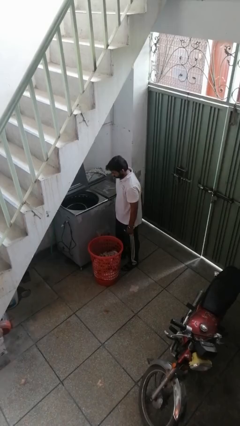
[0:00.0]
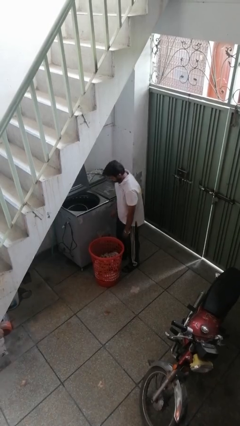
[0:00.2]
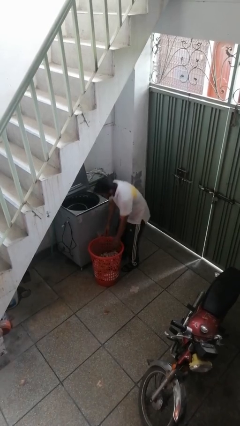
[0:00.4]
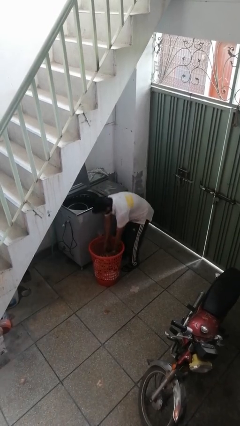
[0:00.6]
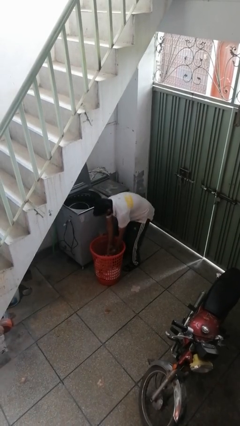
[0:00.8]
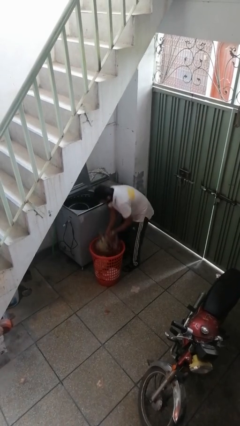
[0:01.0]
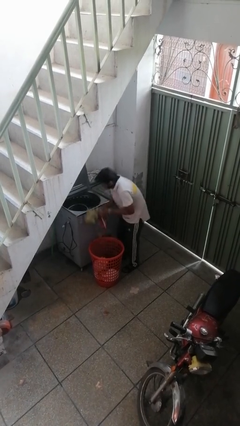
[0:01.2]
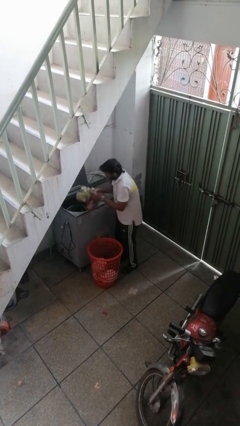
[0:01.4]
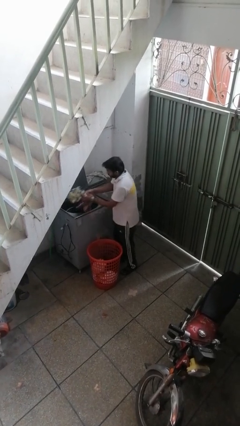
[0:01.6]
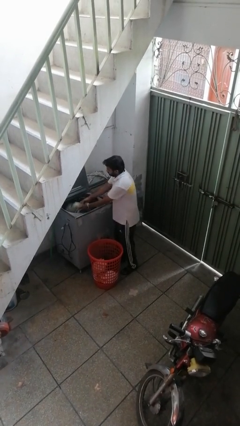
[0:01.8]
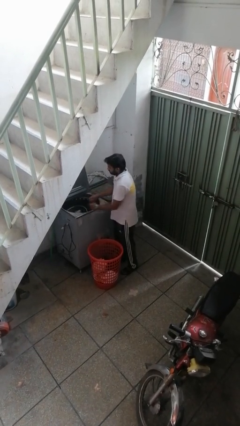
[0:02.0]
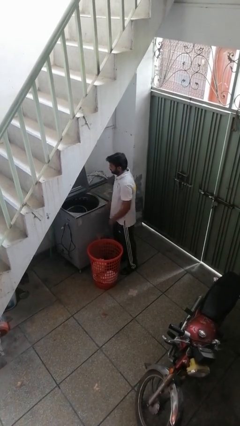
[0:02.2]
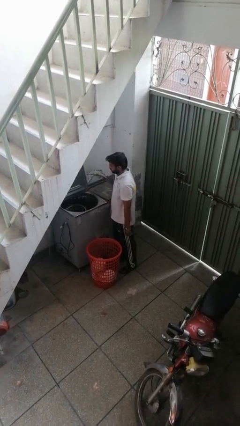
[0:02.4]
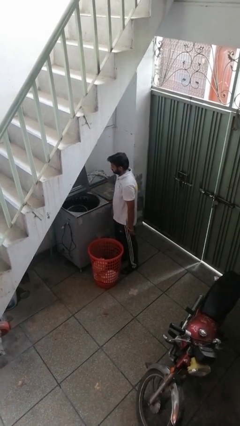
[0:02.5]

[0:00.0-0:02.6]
person loads clotheswasher

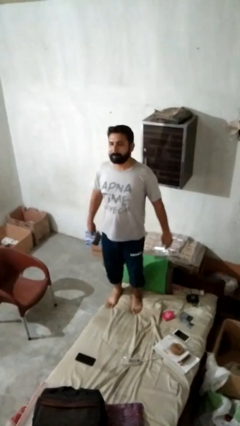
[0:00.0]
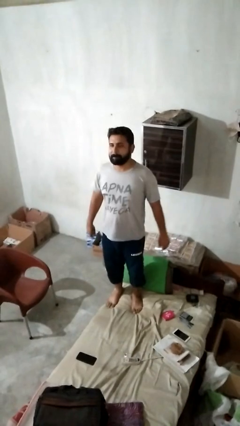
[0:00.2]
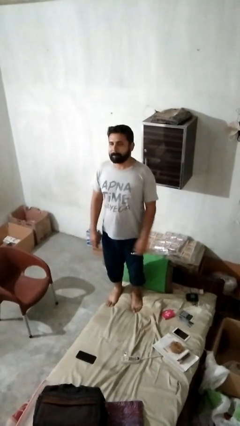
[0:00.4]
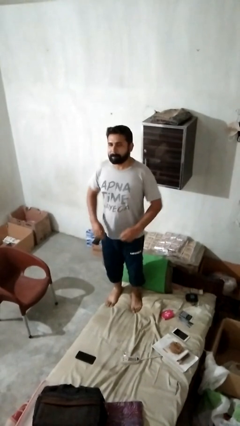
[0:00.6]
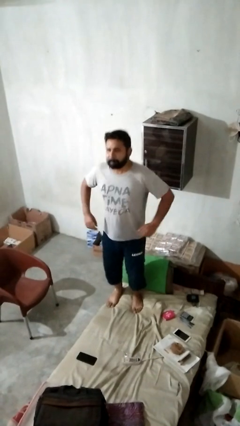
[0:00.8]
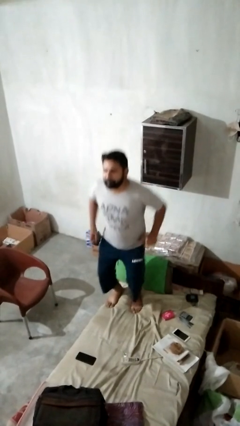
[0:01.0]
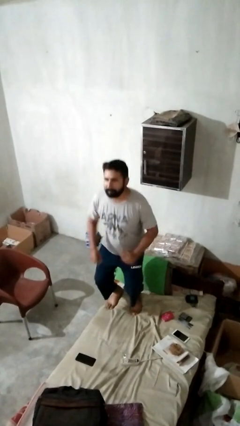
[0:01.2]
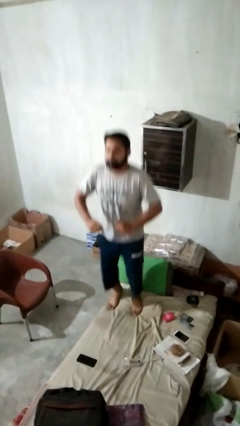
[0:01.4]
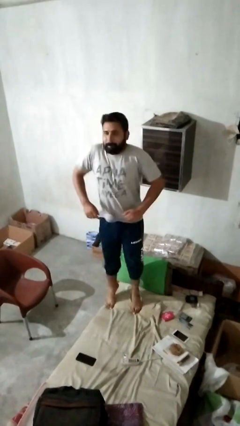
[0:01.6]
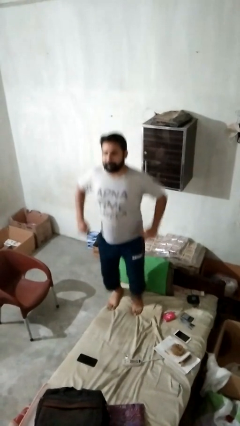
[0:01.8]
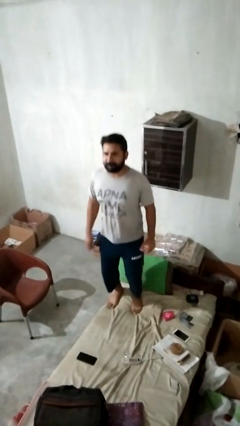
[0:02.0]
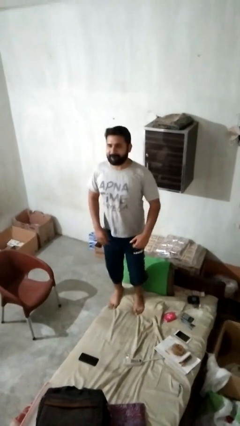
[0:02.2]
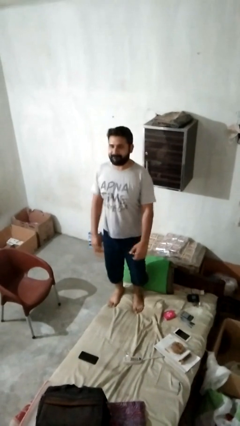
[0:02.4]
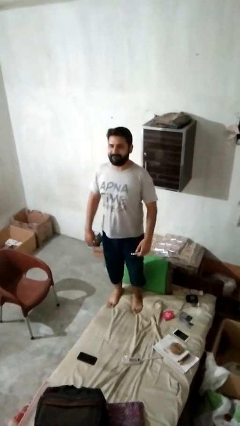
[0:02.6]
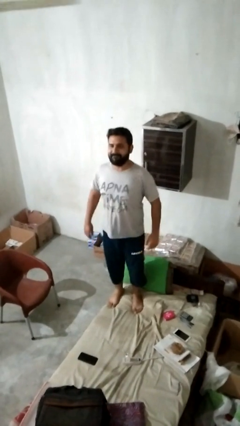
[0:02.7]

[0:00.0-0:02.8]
person jumps on bed

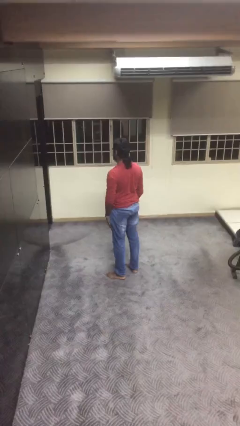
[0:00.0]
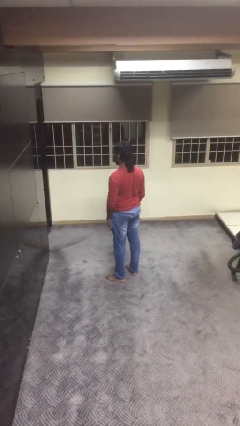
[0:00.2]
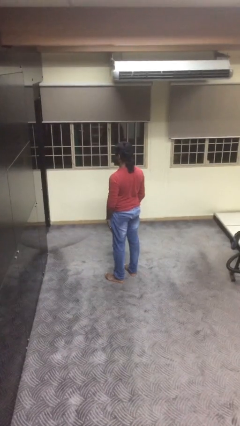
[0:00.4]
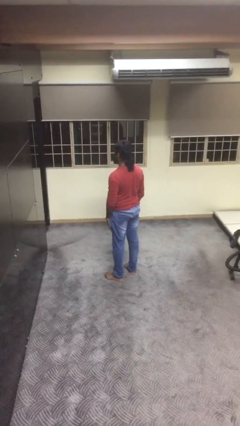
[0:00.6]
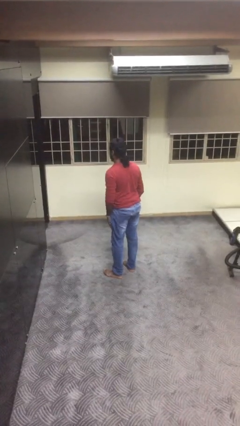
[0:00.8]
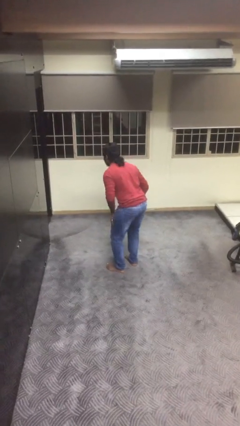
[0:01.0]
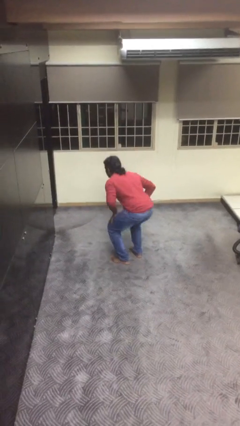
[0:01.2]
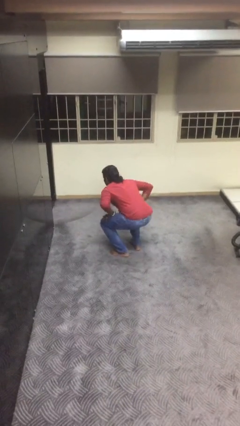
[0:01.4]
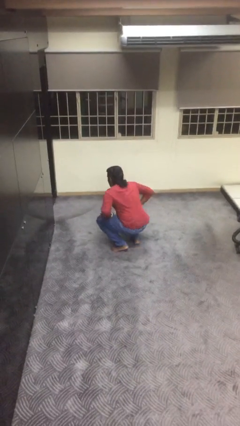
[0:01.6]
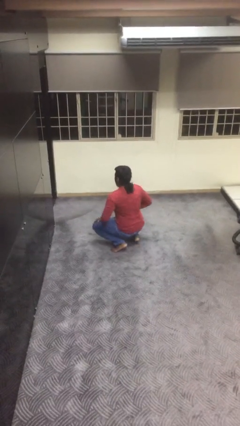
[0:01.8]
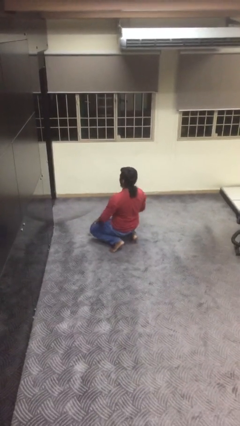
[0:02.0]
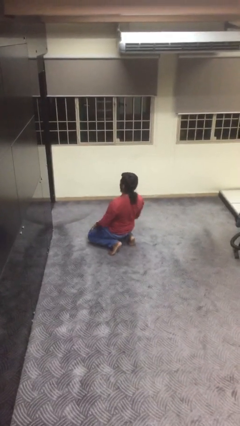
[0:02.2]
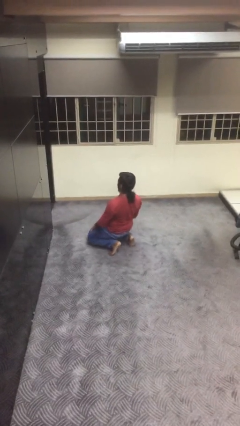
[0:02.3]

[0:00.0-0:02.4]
person kneels

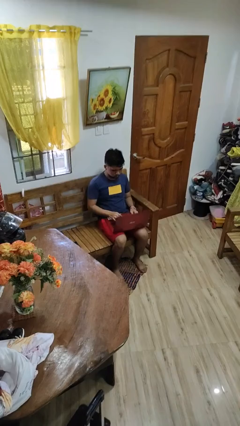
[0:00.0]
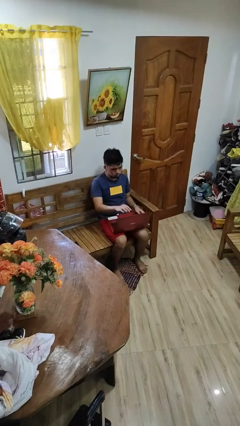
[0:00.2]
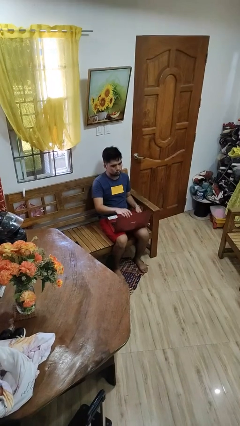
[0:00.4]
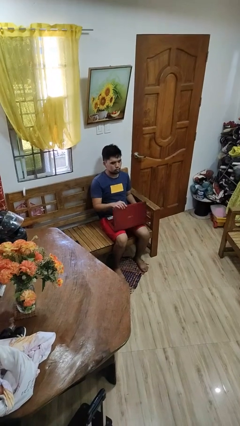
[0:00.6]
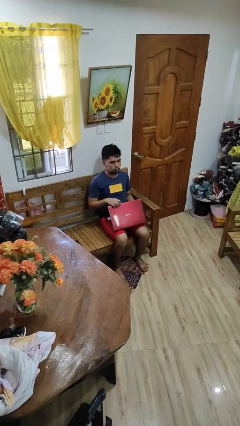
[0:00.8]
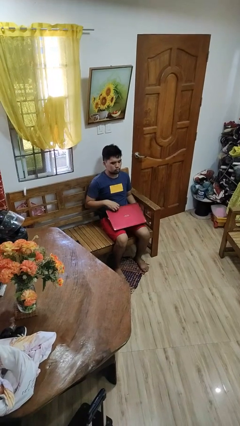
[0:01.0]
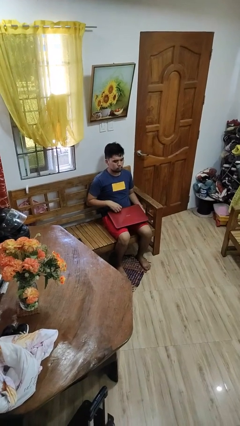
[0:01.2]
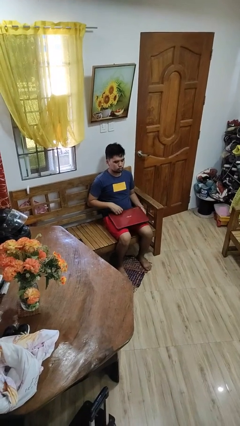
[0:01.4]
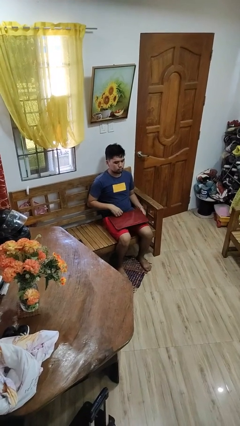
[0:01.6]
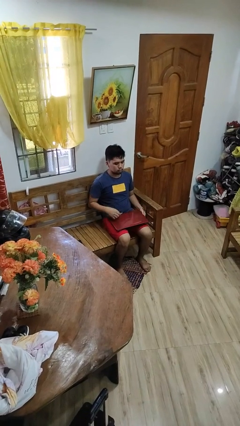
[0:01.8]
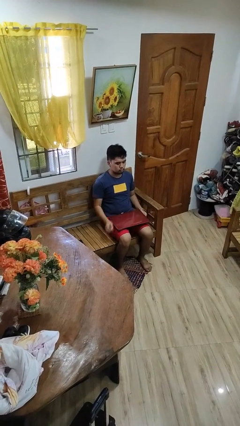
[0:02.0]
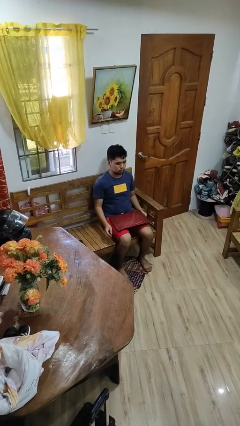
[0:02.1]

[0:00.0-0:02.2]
person closes laptop

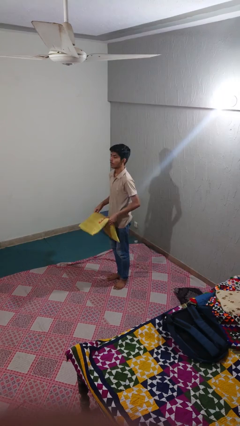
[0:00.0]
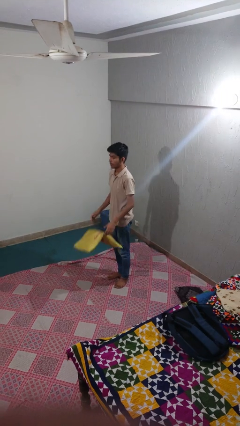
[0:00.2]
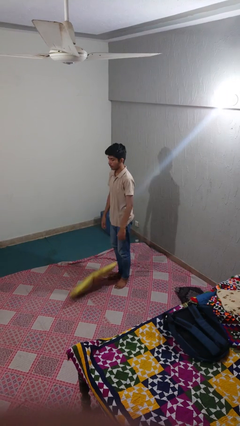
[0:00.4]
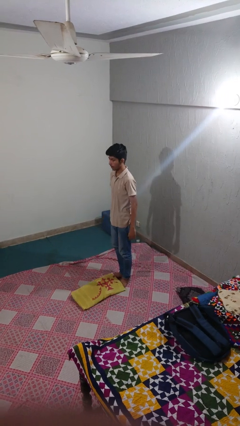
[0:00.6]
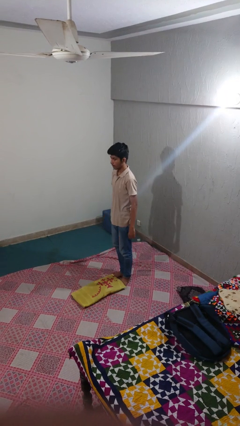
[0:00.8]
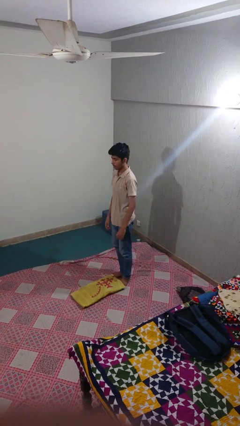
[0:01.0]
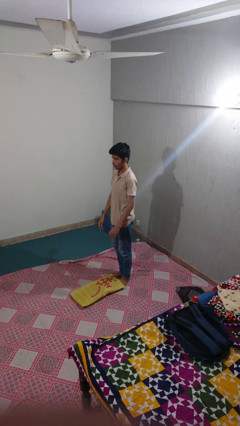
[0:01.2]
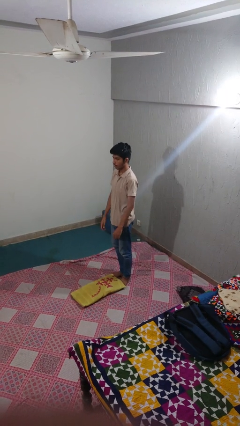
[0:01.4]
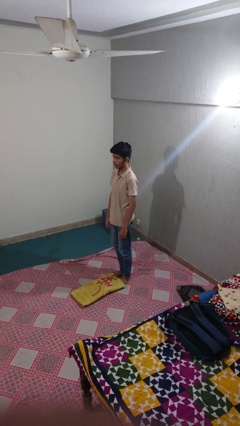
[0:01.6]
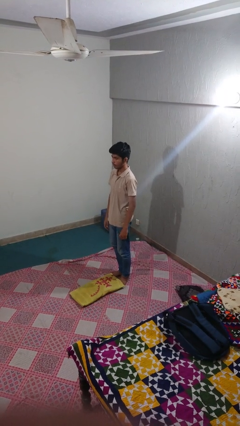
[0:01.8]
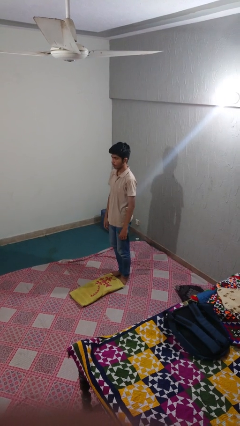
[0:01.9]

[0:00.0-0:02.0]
person drops object

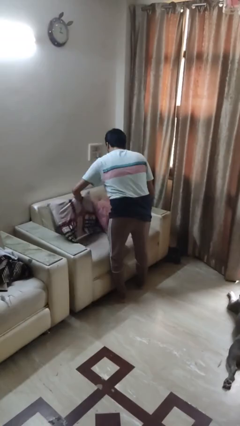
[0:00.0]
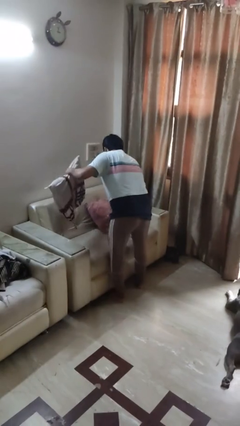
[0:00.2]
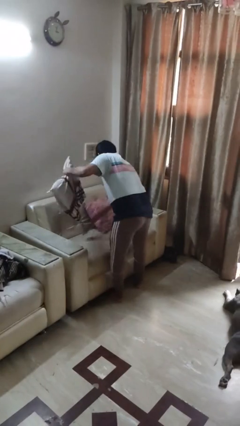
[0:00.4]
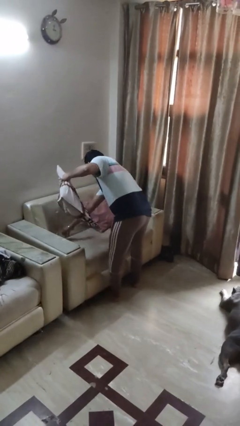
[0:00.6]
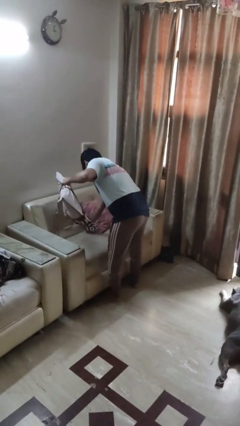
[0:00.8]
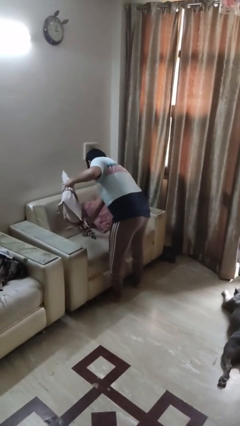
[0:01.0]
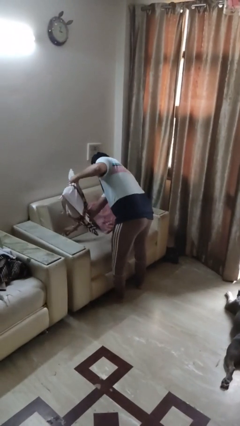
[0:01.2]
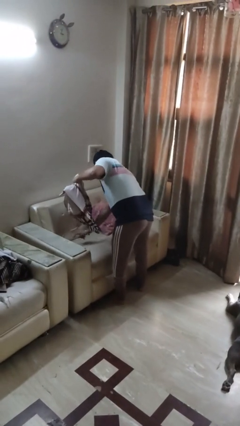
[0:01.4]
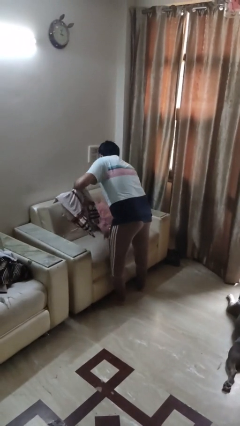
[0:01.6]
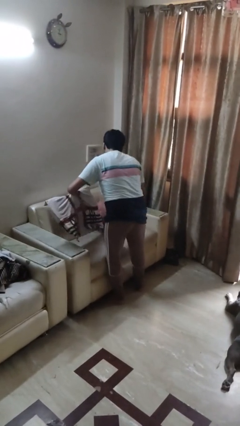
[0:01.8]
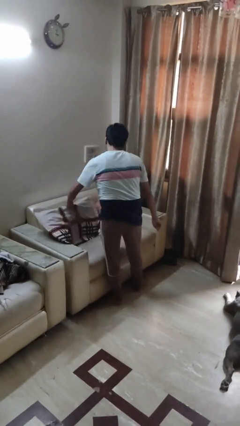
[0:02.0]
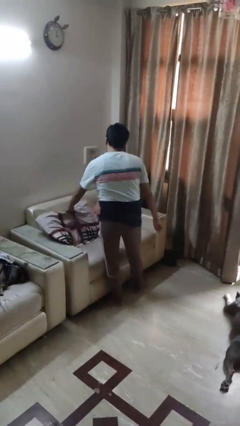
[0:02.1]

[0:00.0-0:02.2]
person searches in couch

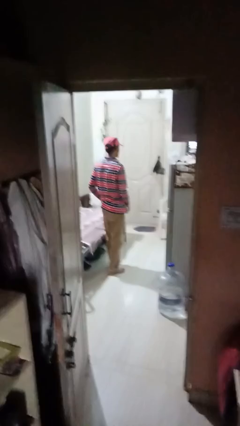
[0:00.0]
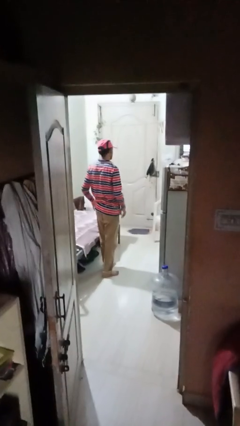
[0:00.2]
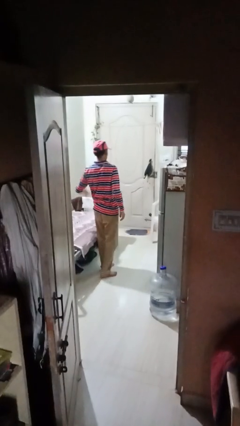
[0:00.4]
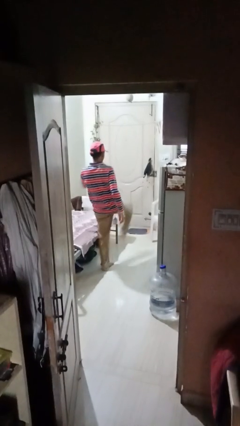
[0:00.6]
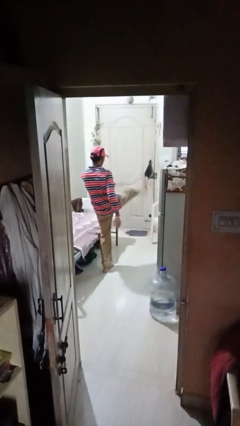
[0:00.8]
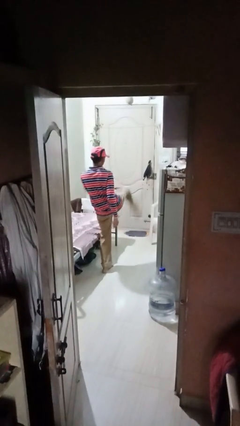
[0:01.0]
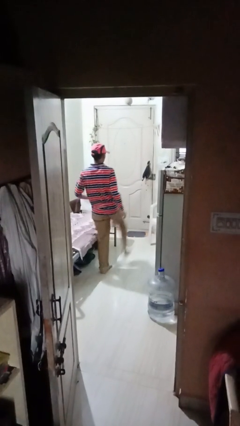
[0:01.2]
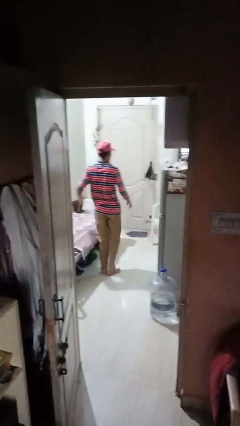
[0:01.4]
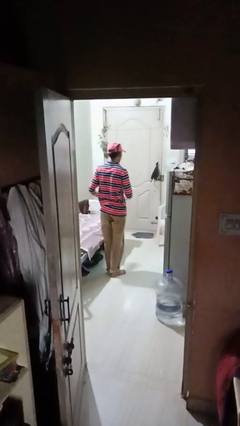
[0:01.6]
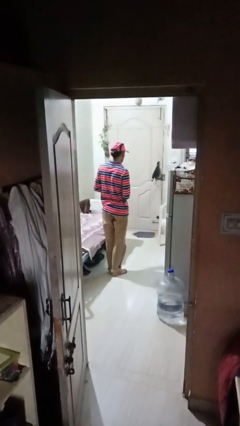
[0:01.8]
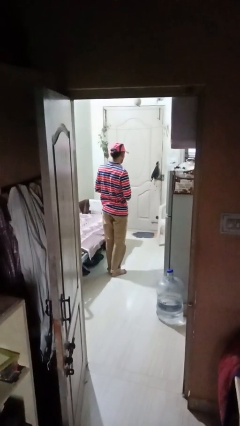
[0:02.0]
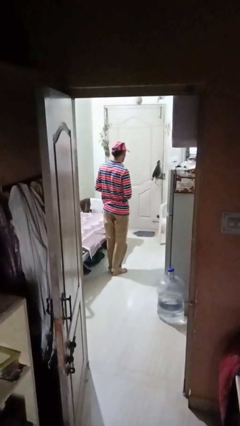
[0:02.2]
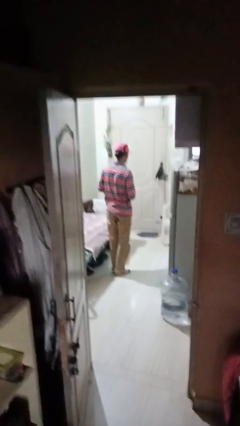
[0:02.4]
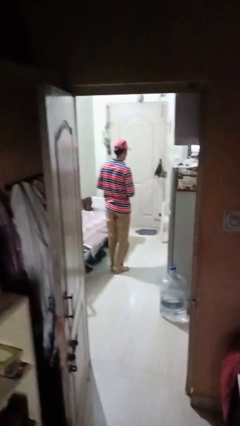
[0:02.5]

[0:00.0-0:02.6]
person karate kicks

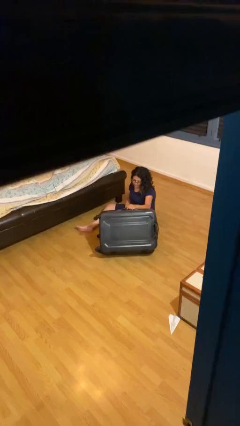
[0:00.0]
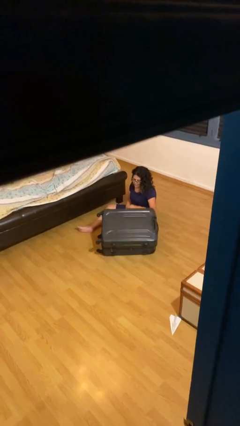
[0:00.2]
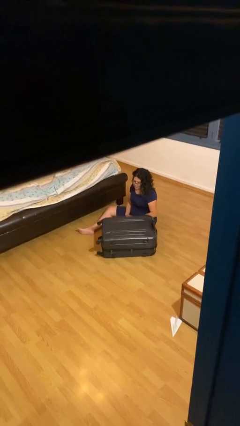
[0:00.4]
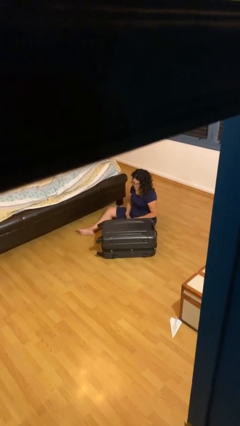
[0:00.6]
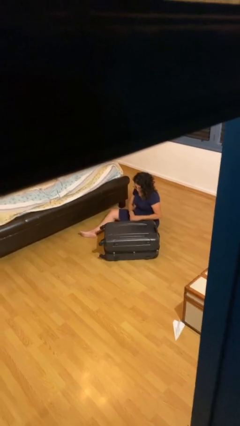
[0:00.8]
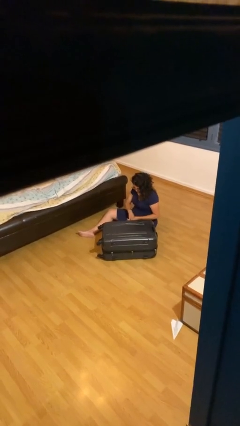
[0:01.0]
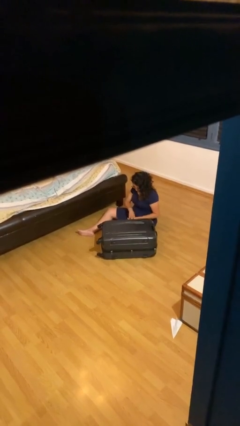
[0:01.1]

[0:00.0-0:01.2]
person closes suitcase